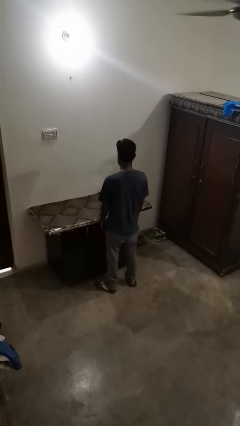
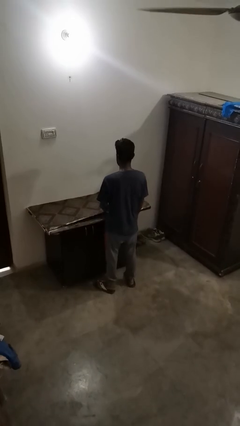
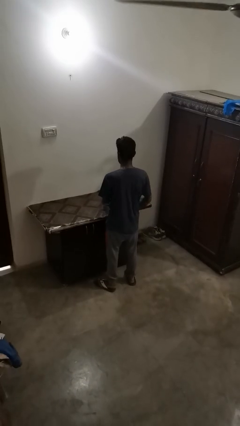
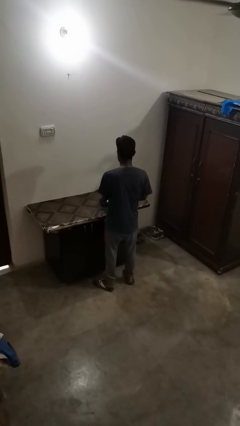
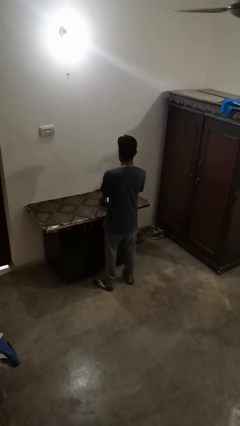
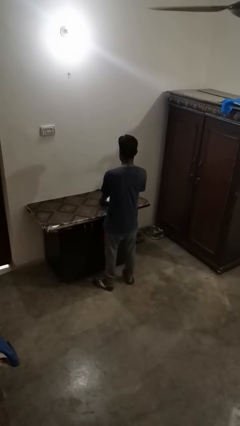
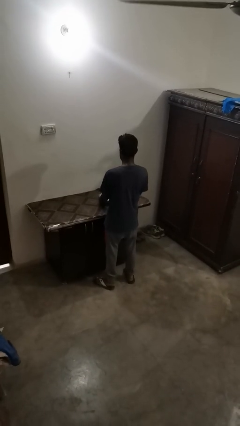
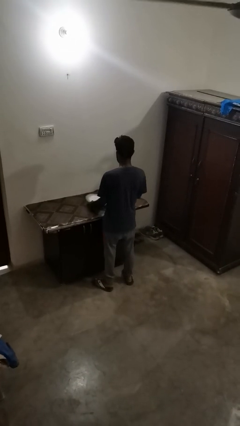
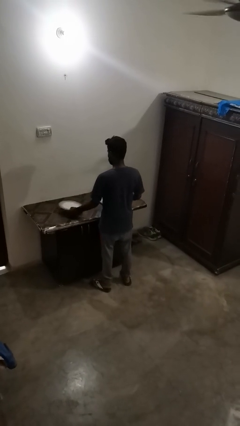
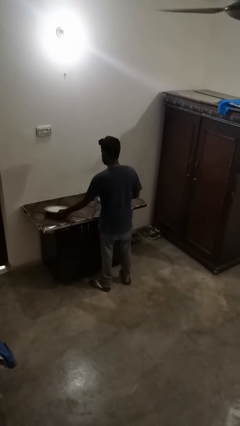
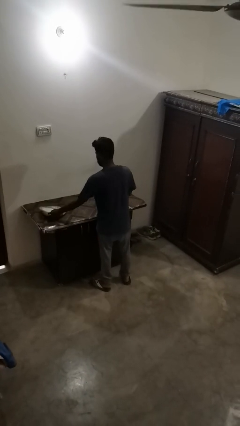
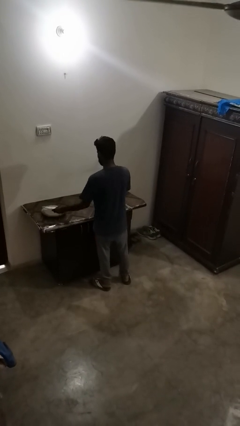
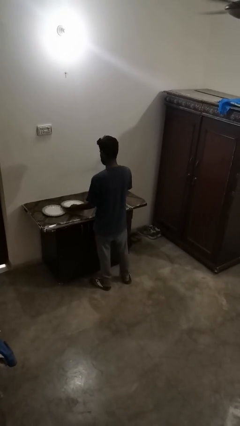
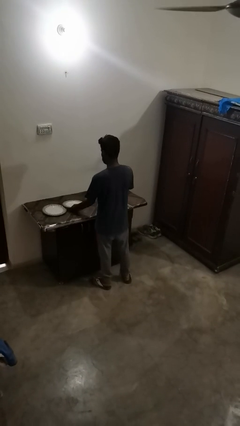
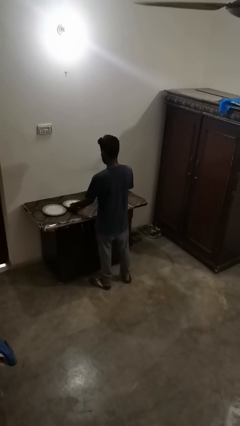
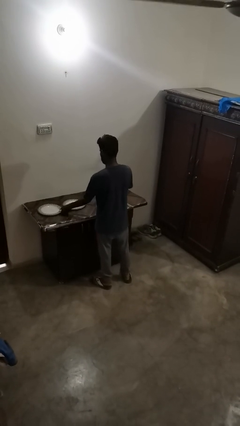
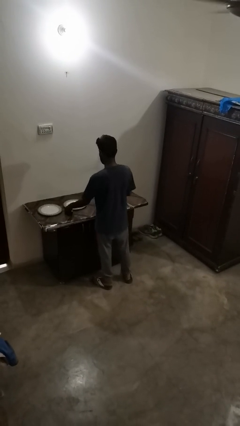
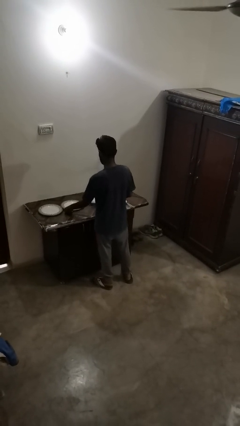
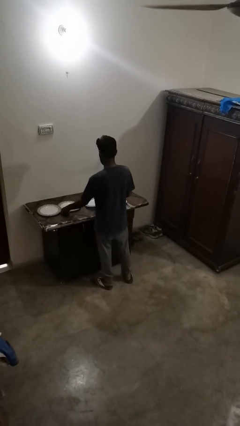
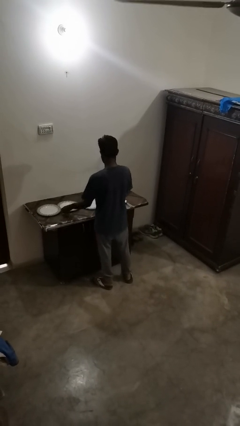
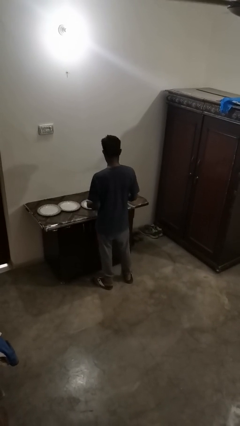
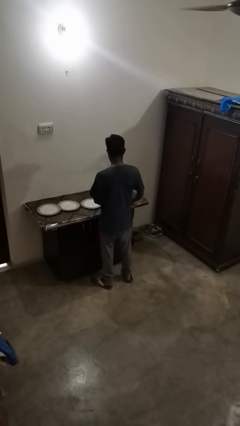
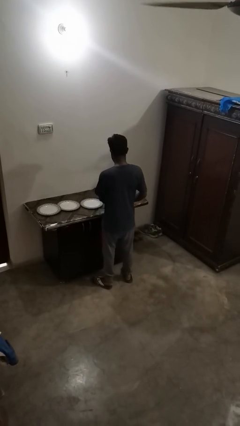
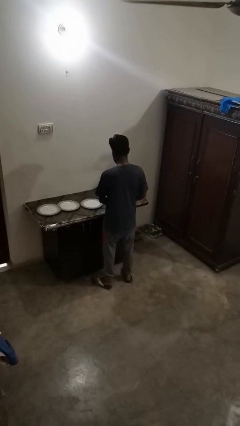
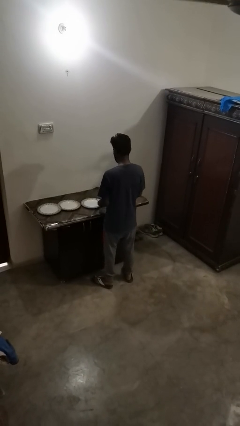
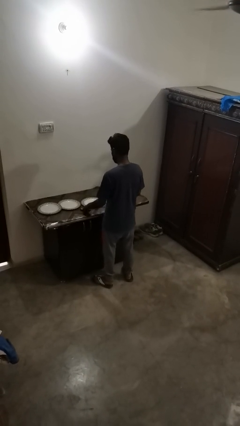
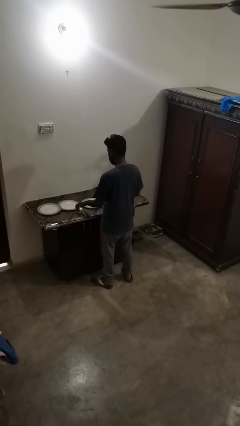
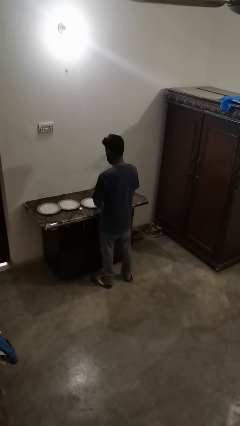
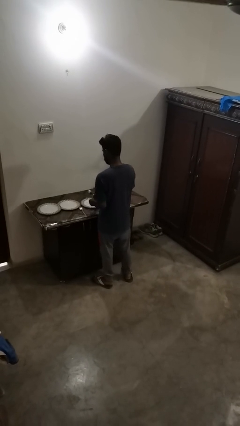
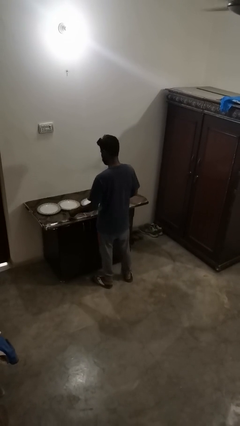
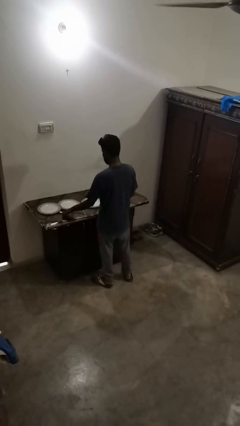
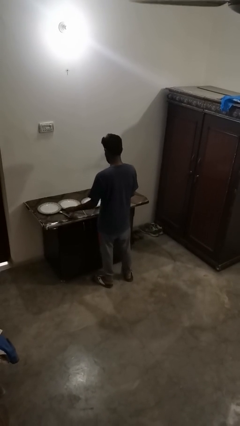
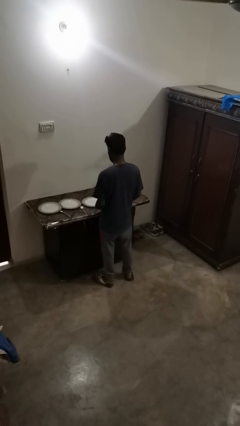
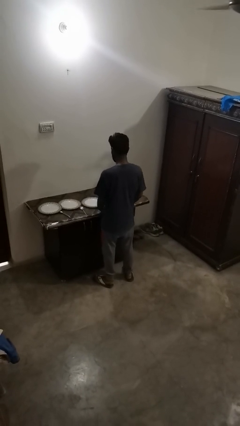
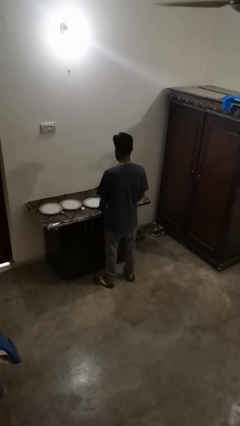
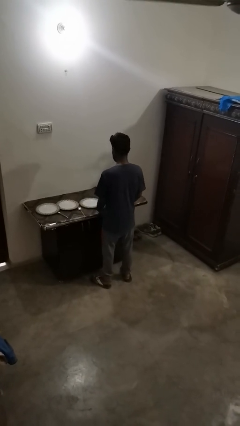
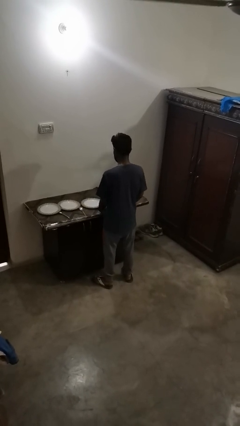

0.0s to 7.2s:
person sets table

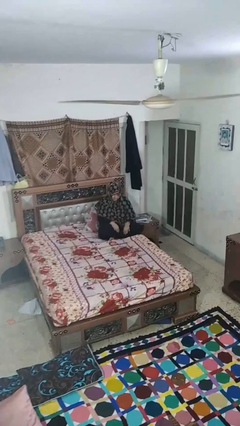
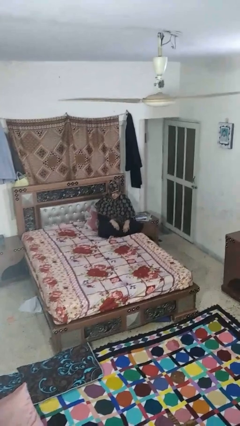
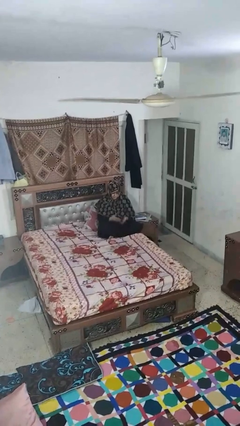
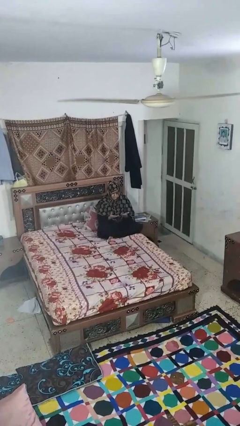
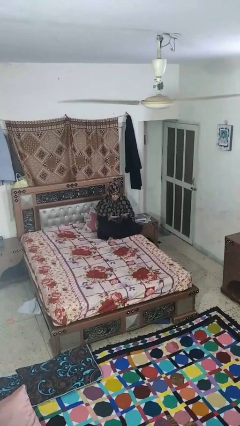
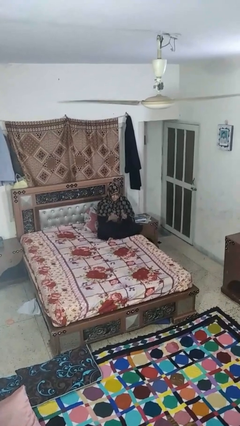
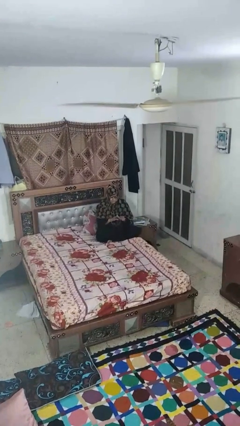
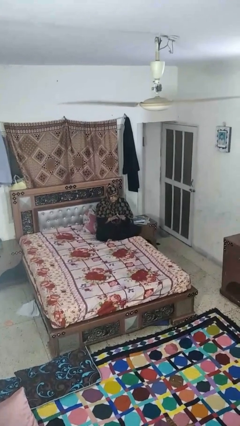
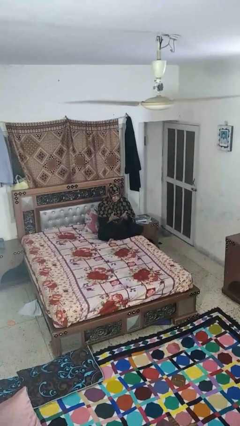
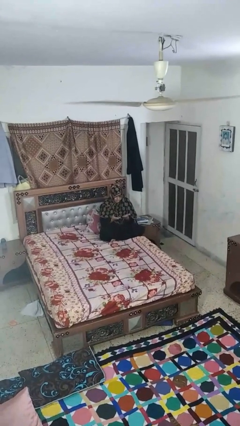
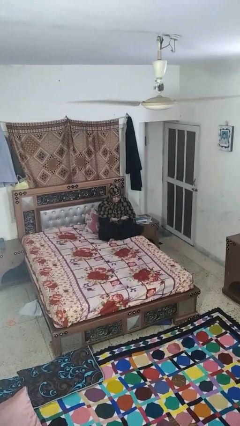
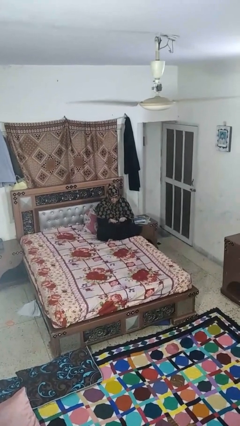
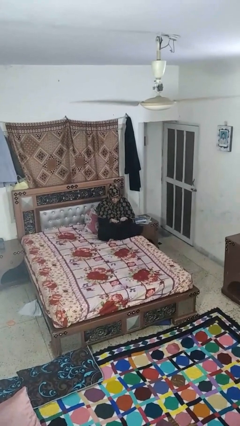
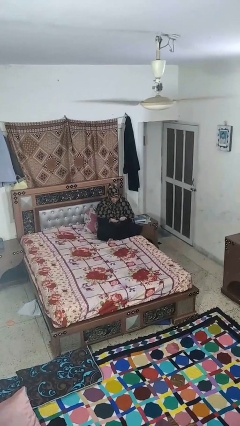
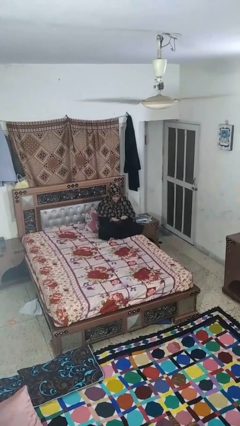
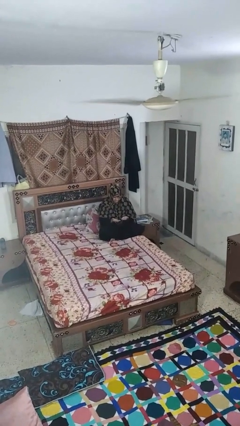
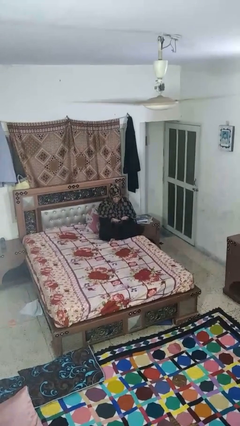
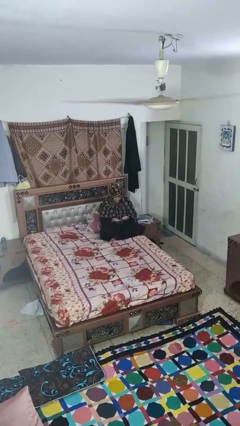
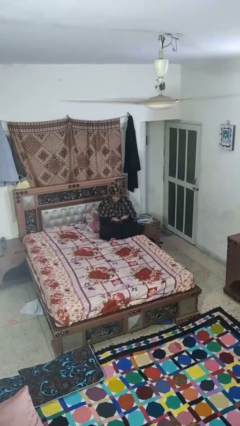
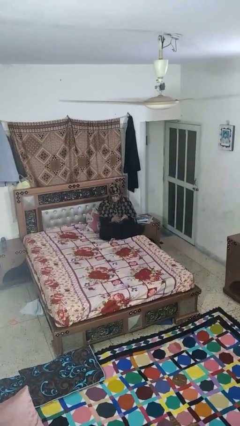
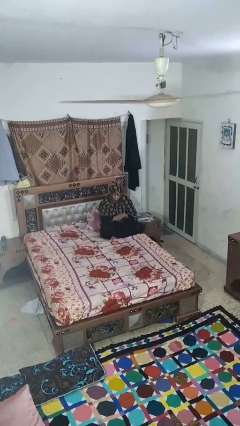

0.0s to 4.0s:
person looks at hands in lap

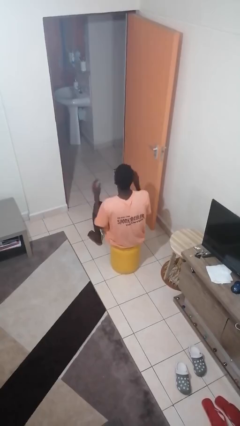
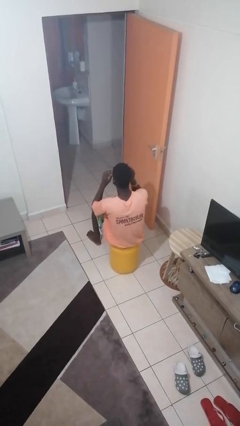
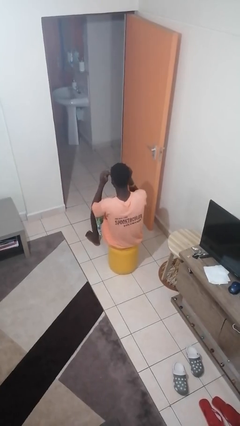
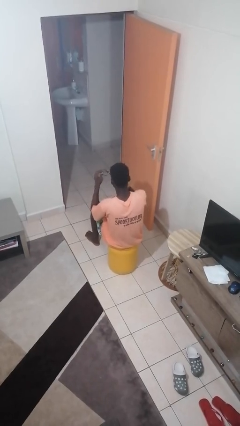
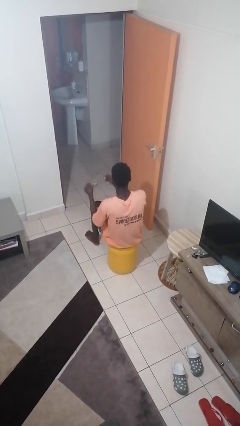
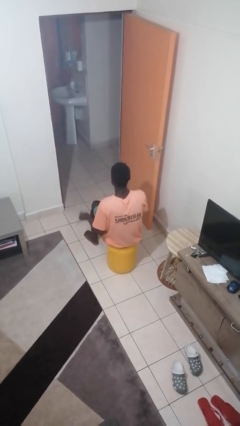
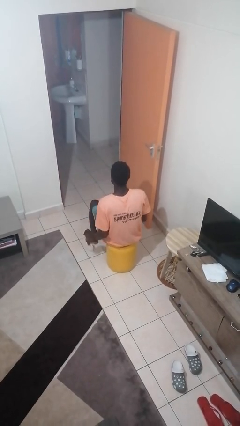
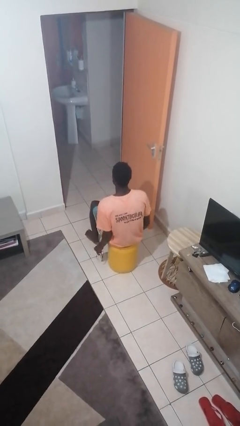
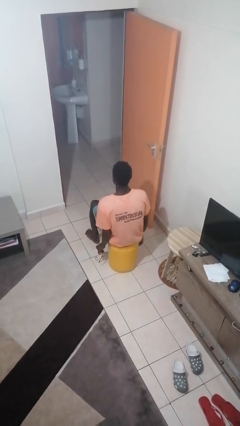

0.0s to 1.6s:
person takes off glasses

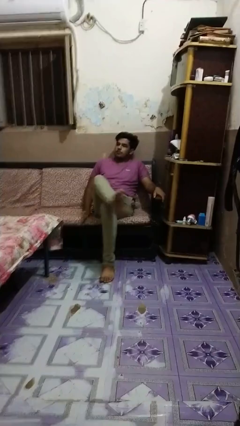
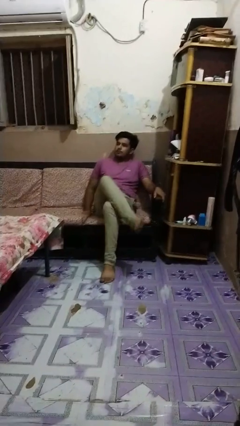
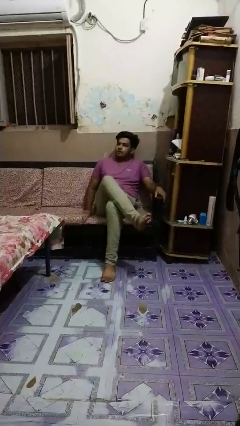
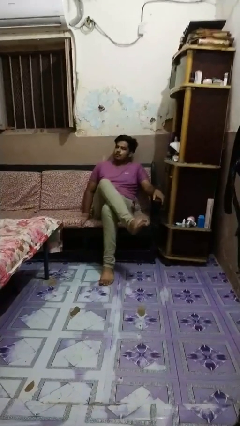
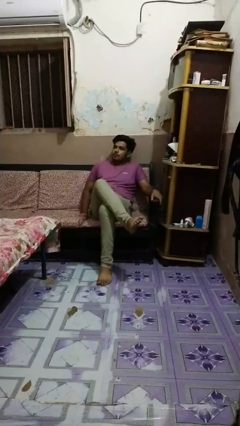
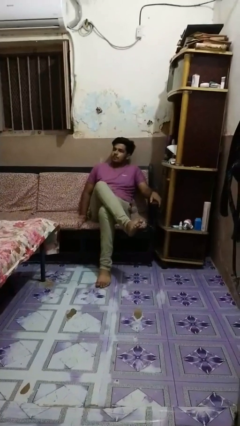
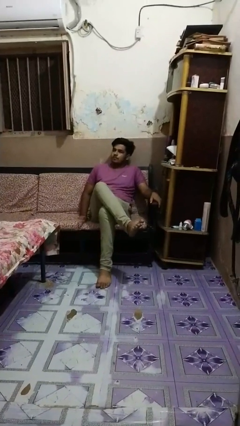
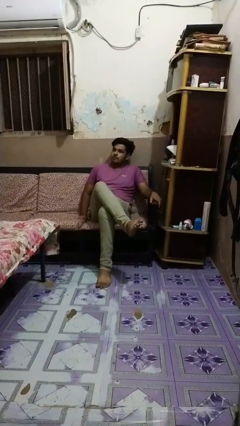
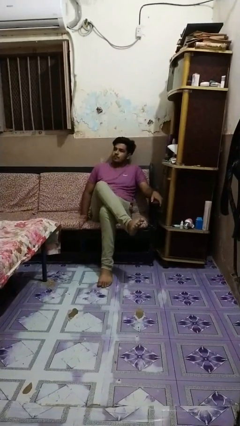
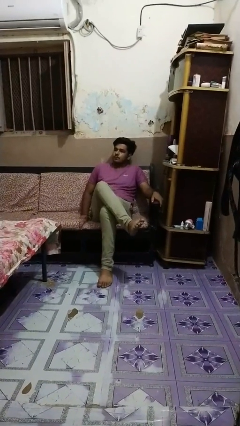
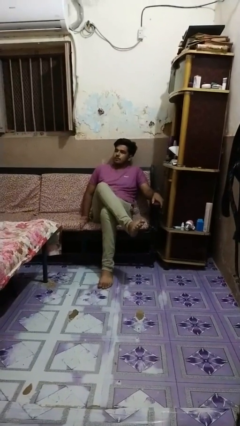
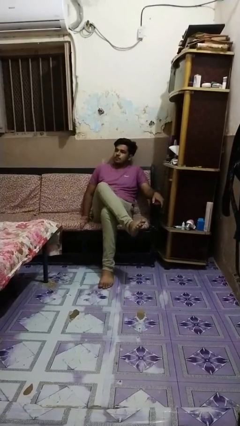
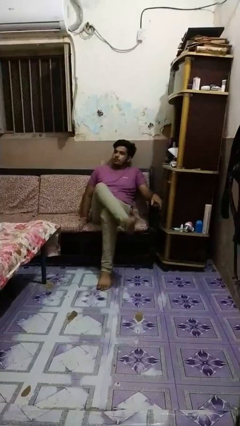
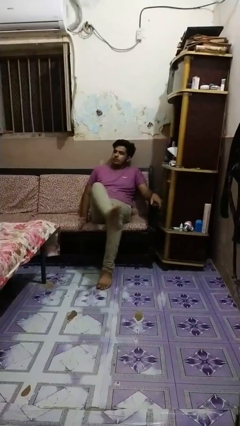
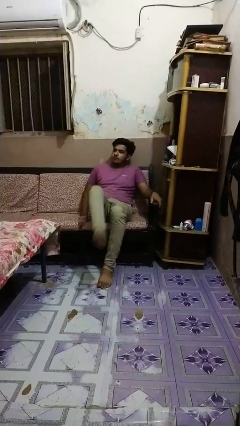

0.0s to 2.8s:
person crosses legs

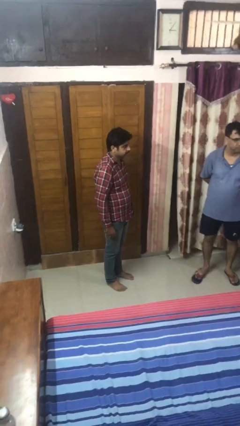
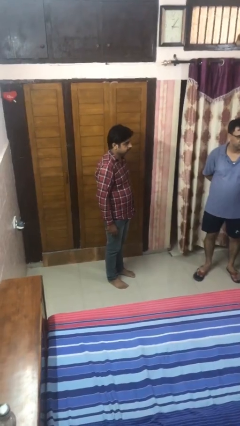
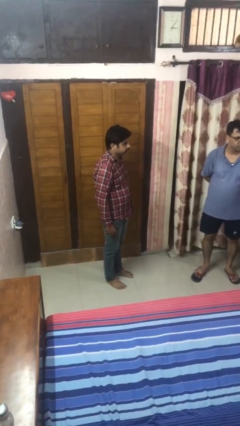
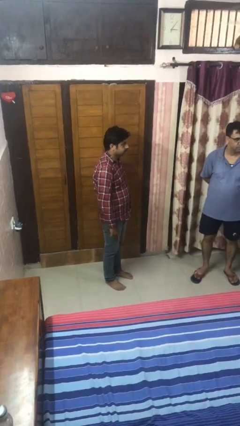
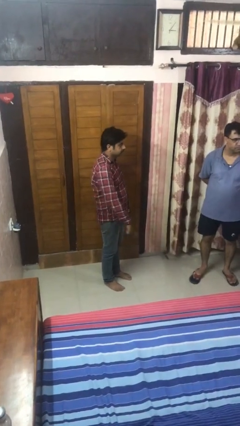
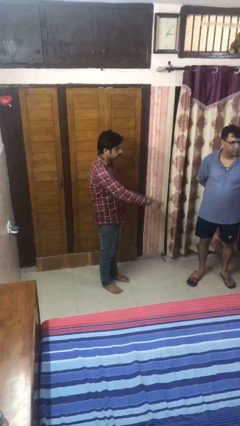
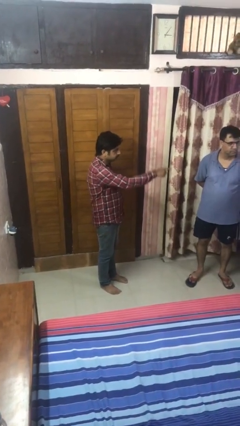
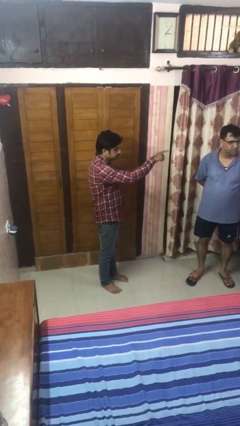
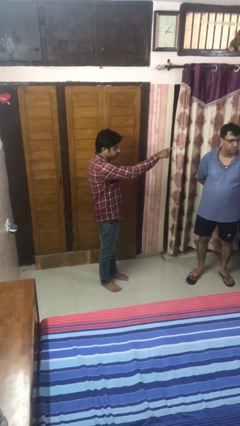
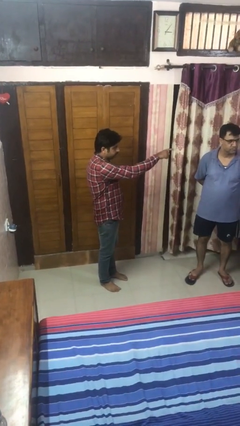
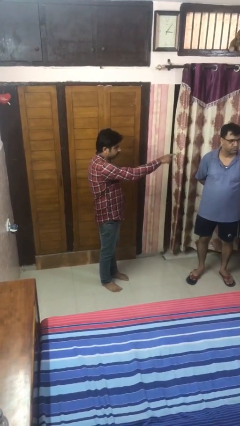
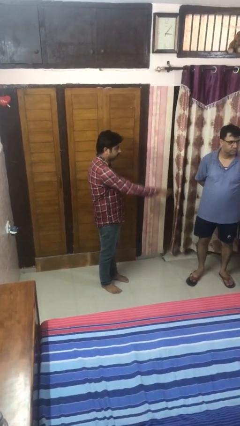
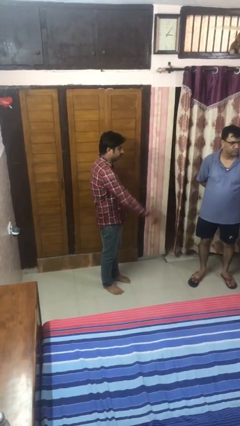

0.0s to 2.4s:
person points at person
